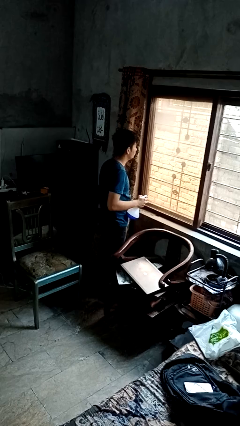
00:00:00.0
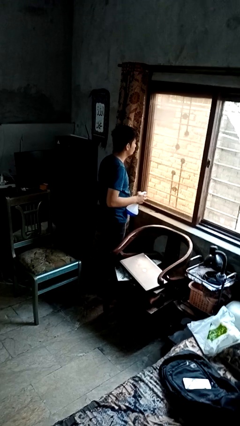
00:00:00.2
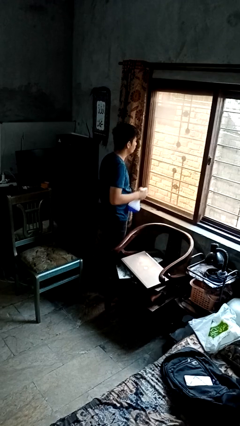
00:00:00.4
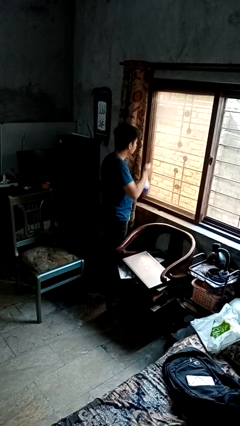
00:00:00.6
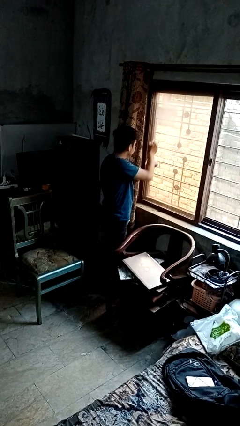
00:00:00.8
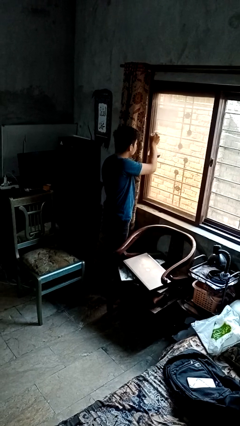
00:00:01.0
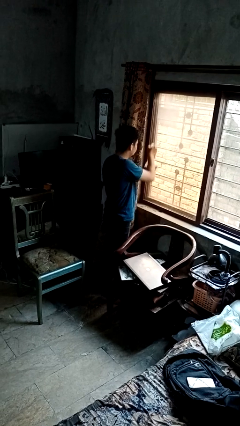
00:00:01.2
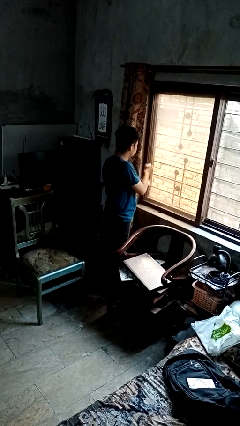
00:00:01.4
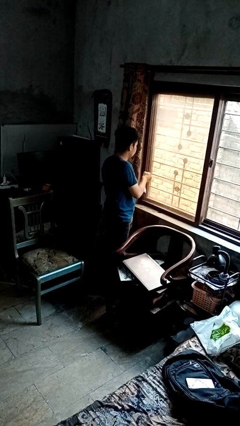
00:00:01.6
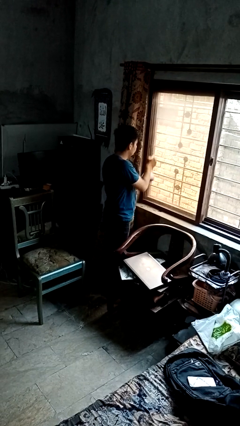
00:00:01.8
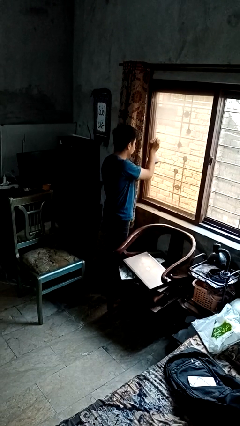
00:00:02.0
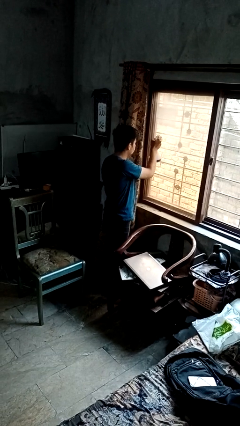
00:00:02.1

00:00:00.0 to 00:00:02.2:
person sprays from bottle

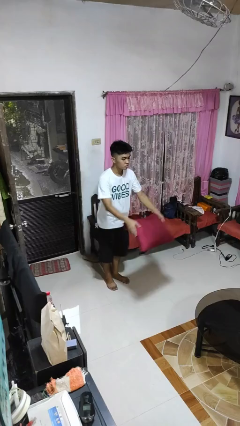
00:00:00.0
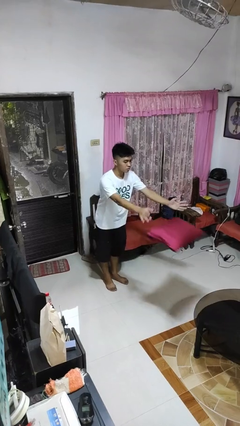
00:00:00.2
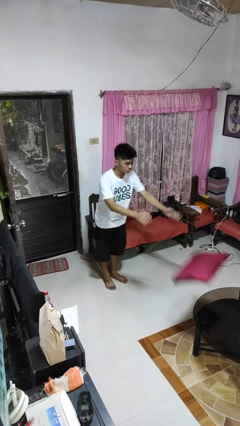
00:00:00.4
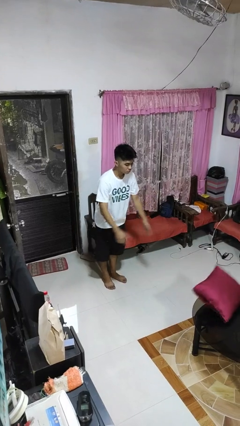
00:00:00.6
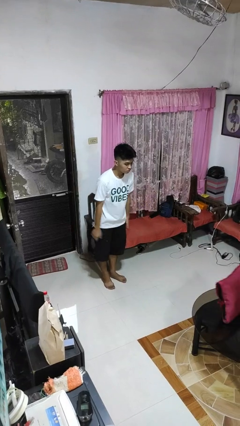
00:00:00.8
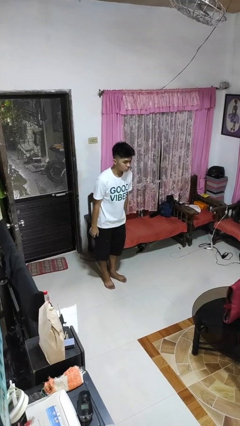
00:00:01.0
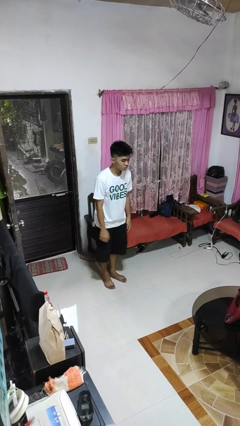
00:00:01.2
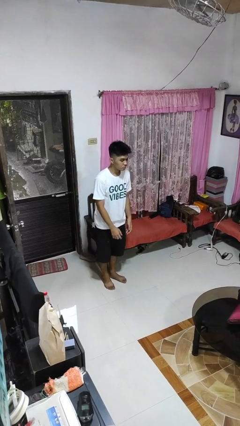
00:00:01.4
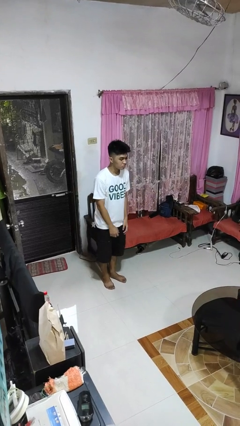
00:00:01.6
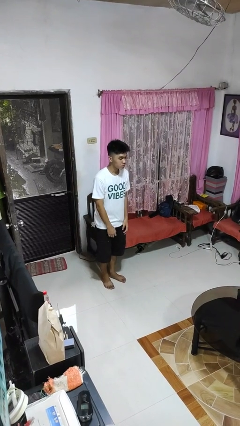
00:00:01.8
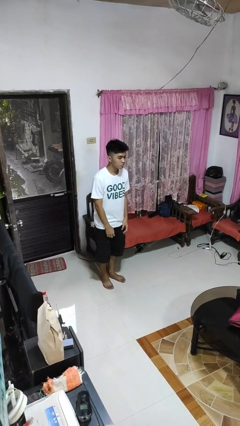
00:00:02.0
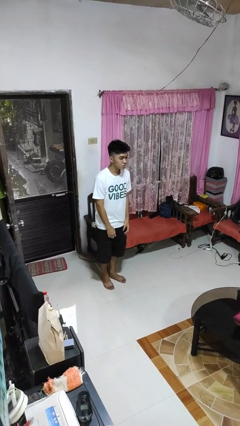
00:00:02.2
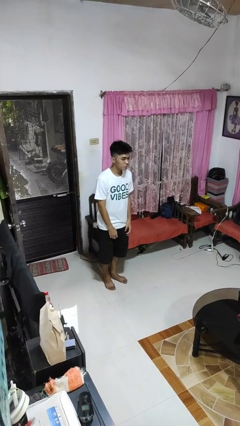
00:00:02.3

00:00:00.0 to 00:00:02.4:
person throws object on table

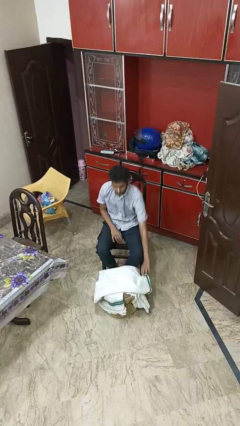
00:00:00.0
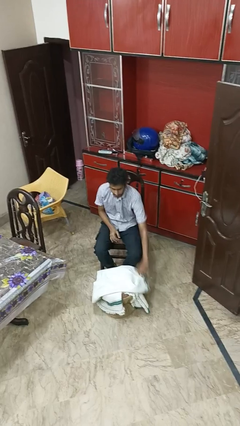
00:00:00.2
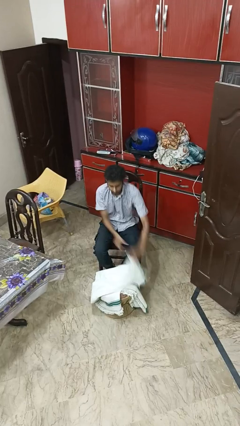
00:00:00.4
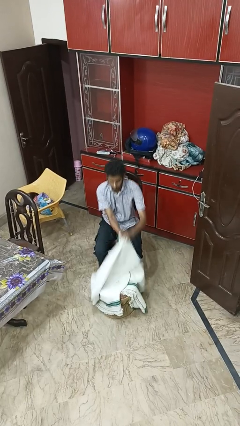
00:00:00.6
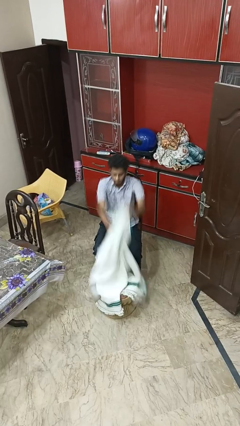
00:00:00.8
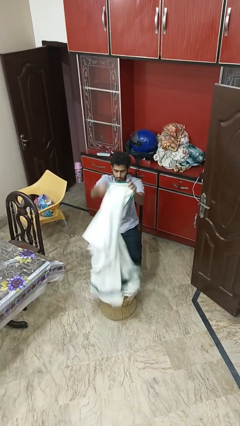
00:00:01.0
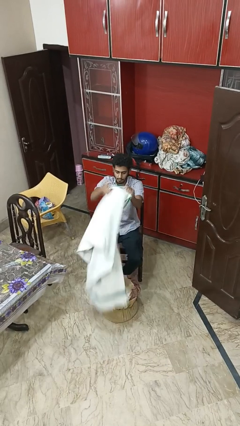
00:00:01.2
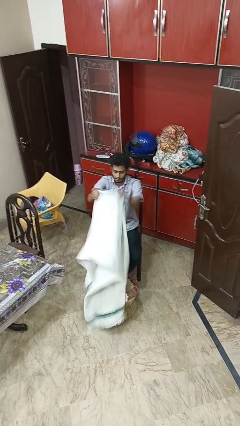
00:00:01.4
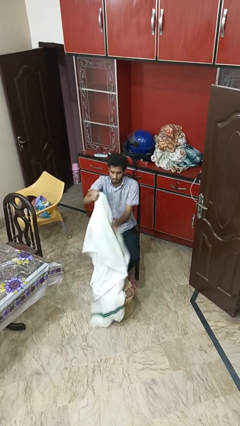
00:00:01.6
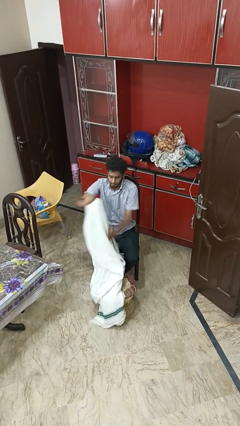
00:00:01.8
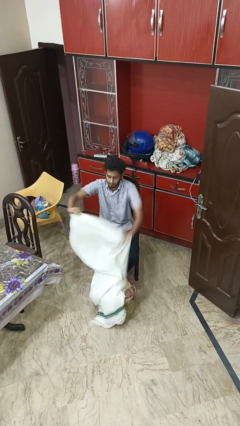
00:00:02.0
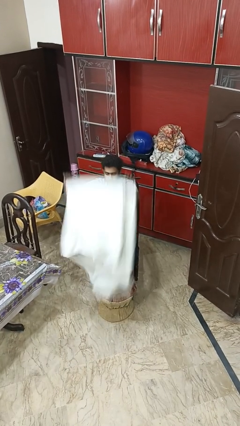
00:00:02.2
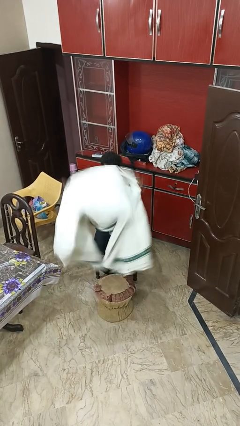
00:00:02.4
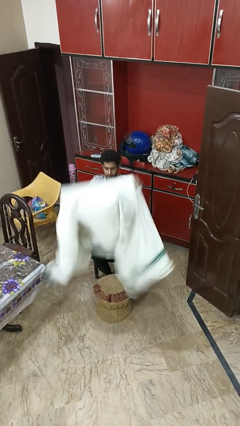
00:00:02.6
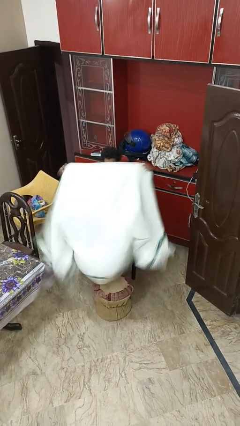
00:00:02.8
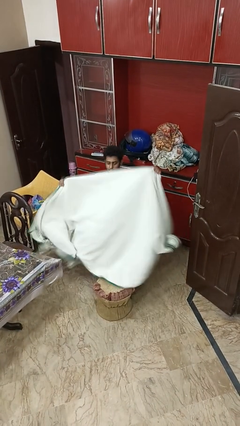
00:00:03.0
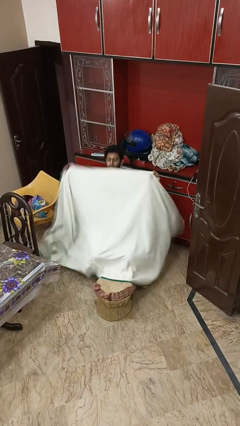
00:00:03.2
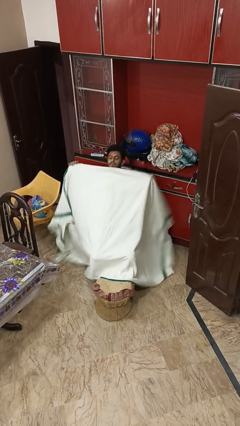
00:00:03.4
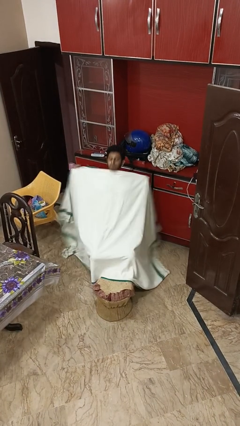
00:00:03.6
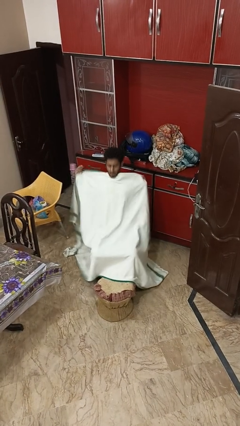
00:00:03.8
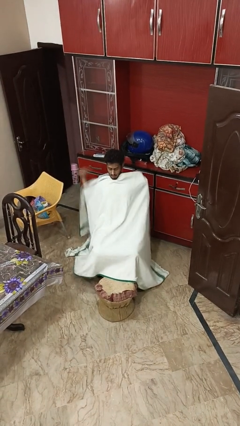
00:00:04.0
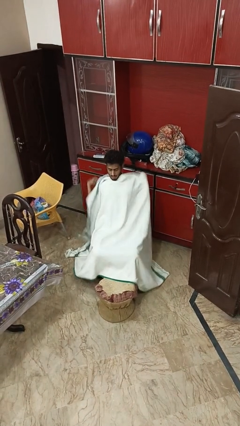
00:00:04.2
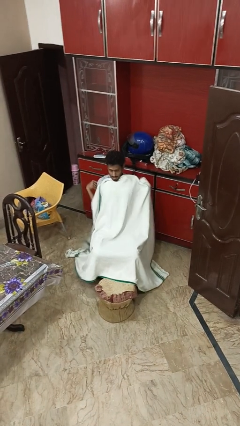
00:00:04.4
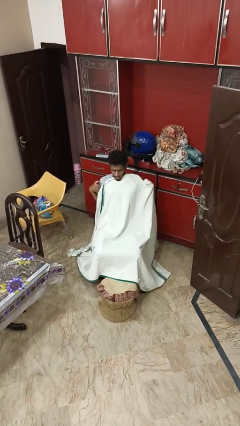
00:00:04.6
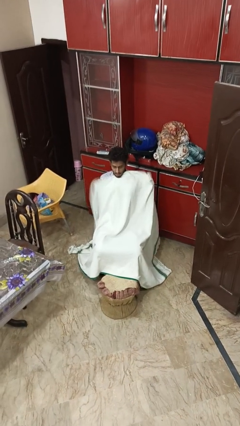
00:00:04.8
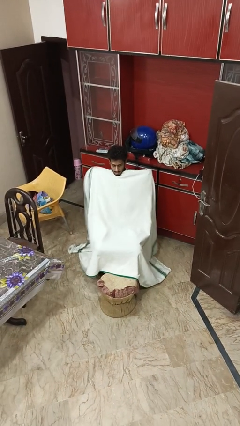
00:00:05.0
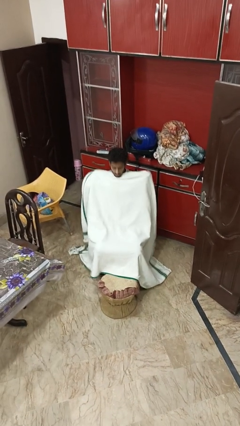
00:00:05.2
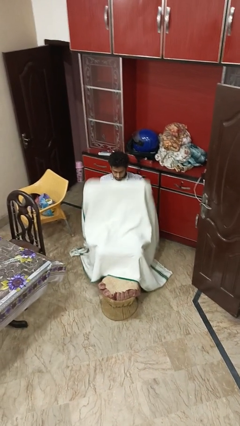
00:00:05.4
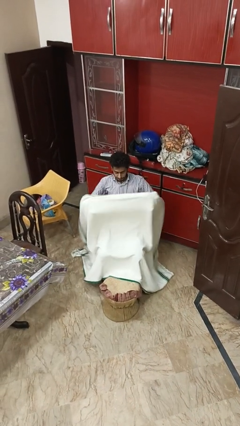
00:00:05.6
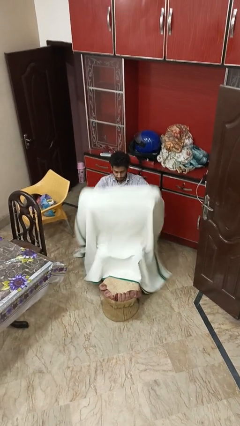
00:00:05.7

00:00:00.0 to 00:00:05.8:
person covers with blanket

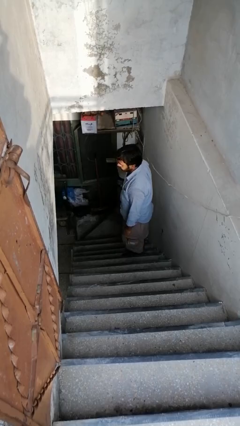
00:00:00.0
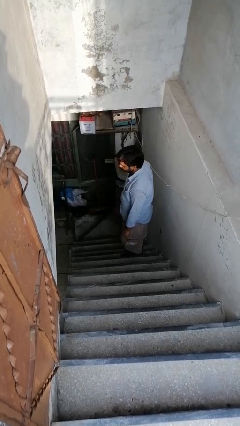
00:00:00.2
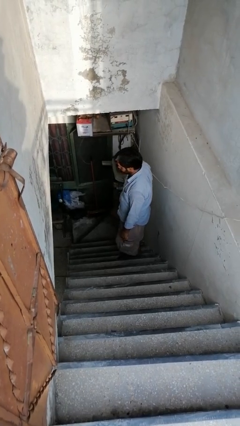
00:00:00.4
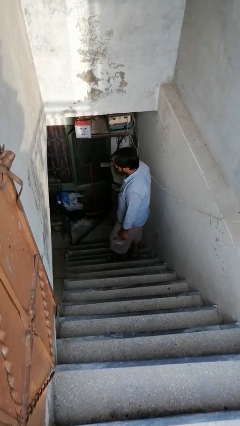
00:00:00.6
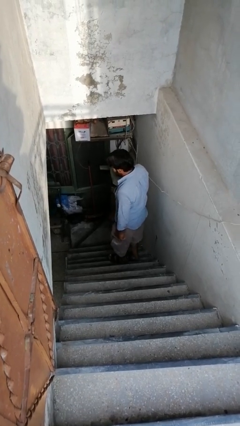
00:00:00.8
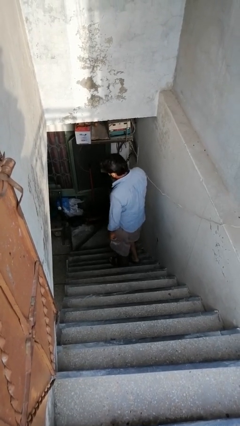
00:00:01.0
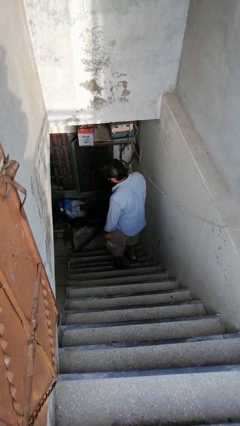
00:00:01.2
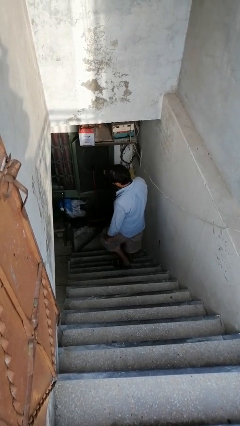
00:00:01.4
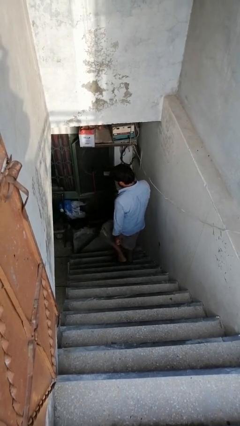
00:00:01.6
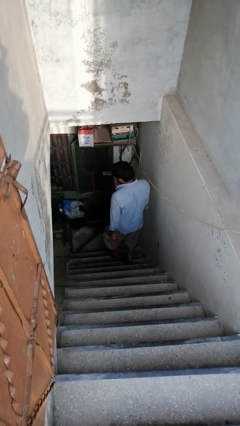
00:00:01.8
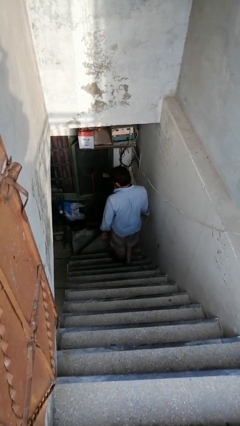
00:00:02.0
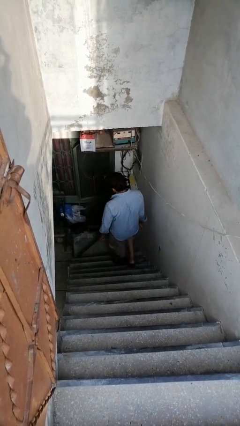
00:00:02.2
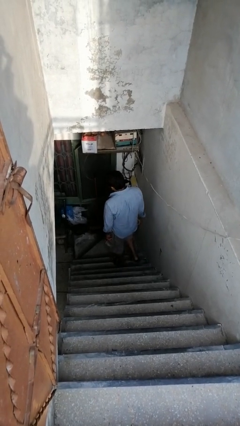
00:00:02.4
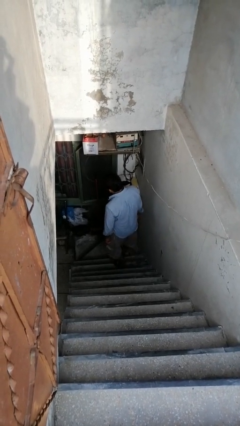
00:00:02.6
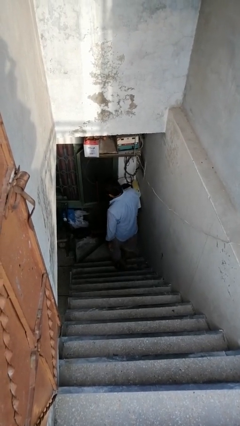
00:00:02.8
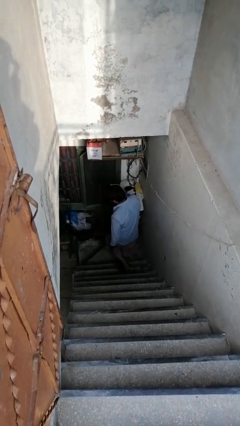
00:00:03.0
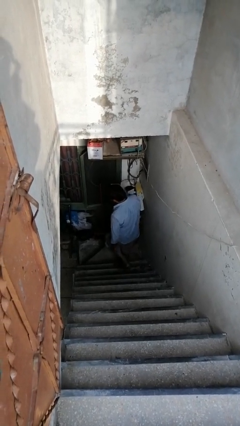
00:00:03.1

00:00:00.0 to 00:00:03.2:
person climbs down stairs

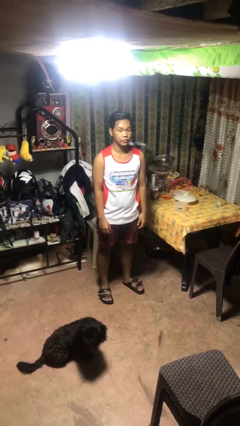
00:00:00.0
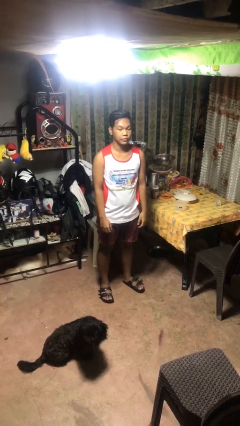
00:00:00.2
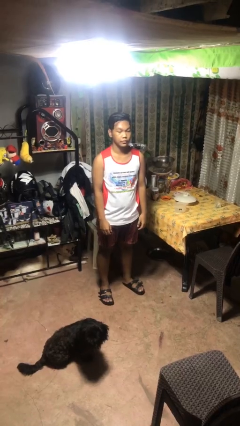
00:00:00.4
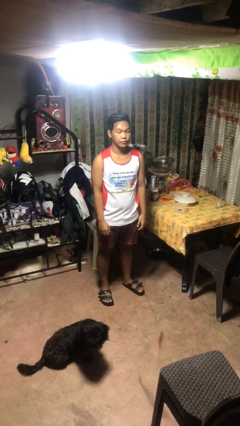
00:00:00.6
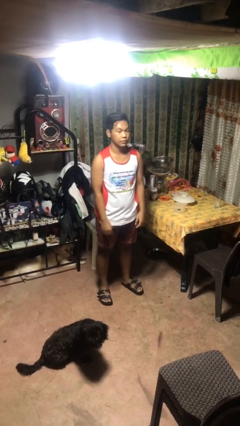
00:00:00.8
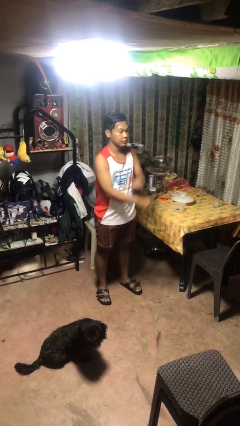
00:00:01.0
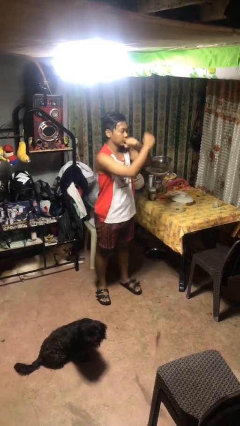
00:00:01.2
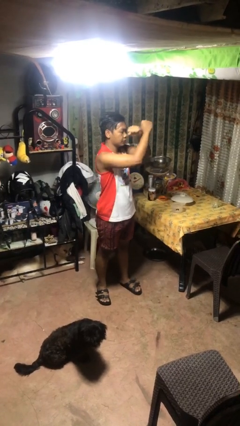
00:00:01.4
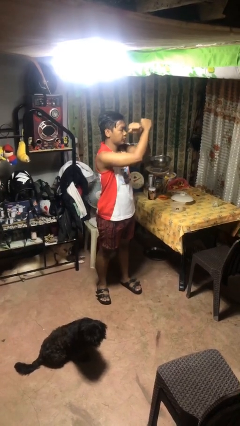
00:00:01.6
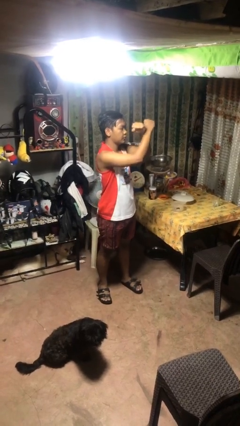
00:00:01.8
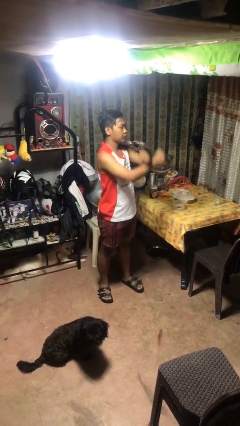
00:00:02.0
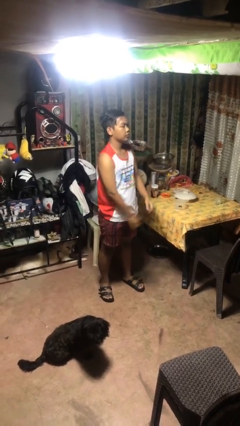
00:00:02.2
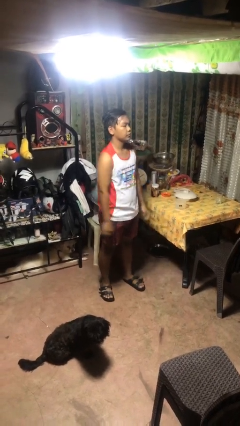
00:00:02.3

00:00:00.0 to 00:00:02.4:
person gestures arms x

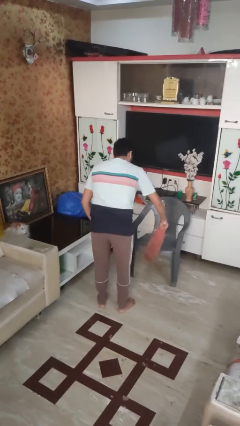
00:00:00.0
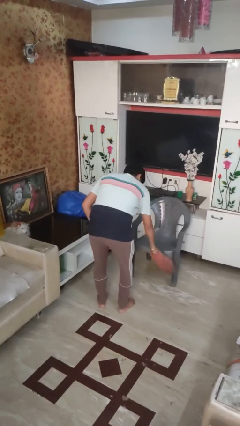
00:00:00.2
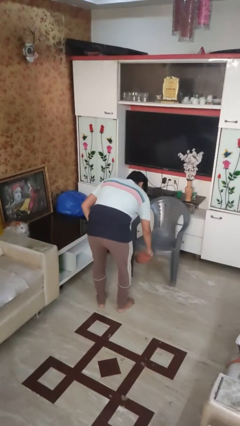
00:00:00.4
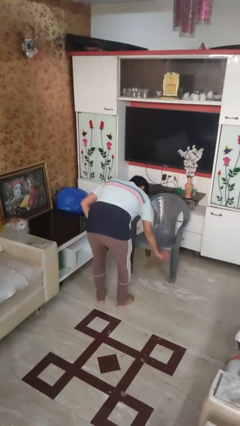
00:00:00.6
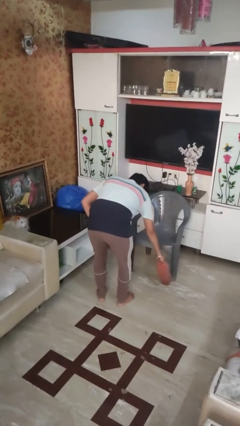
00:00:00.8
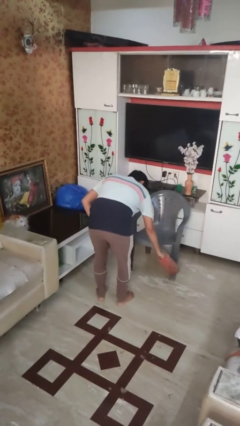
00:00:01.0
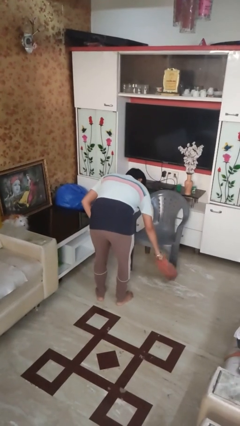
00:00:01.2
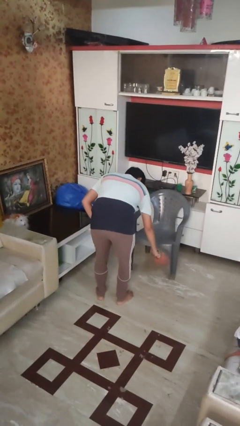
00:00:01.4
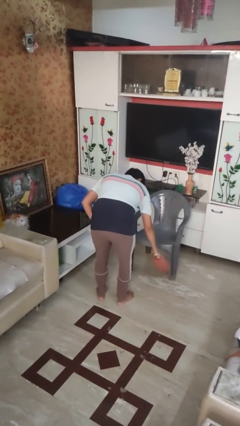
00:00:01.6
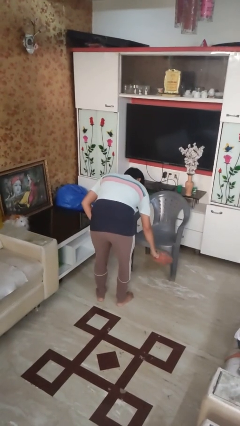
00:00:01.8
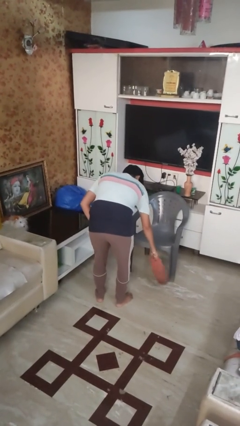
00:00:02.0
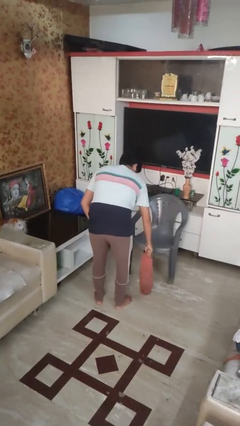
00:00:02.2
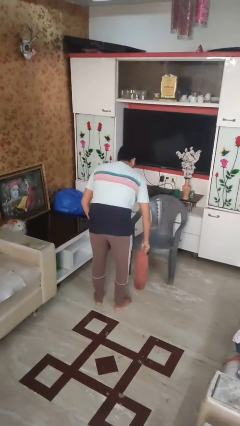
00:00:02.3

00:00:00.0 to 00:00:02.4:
person dusts furniture
